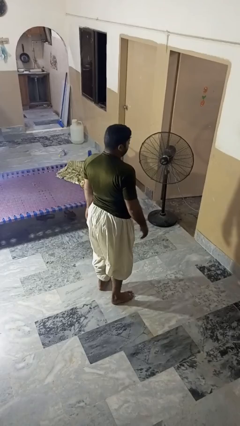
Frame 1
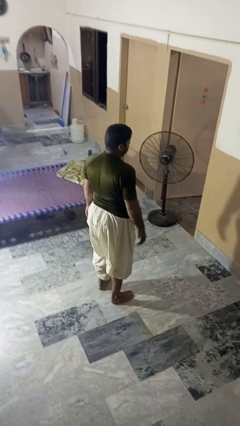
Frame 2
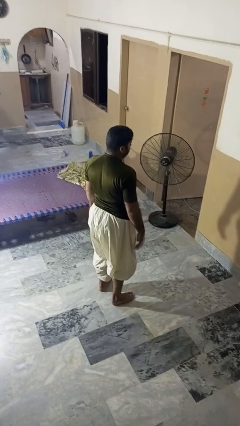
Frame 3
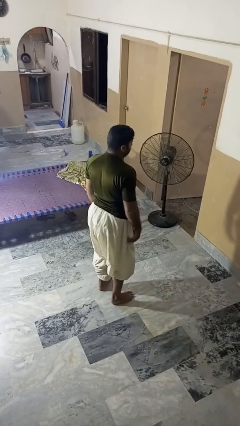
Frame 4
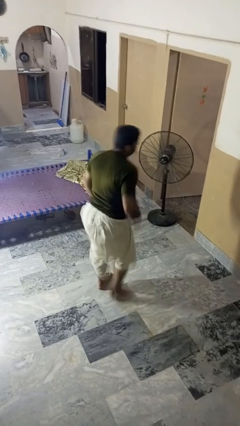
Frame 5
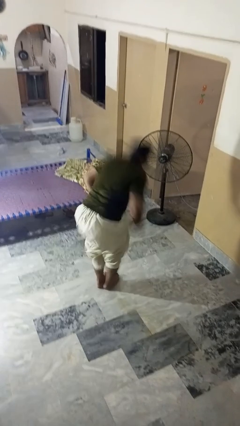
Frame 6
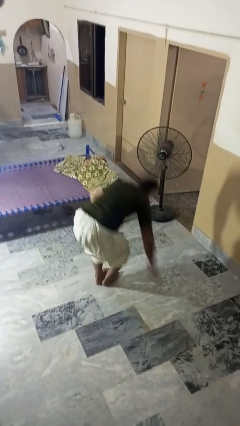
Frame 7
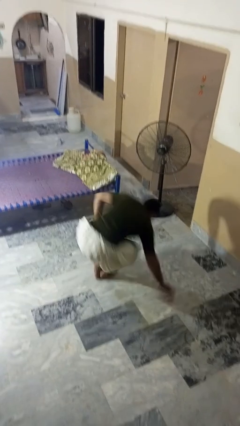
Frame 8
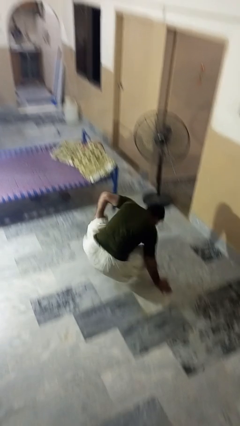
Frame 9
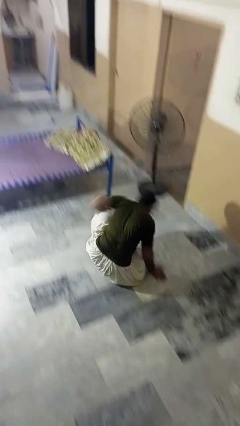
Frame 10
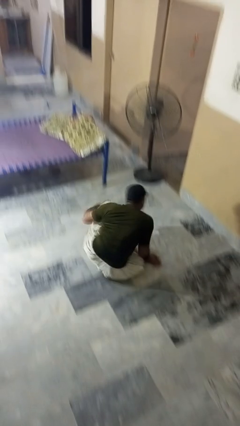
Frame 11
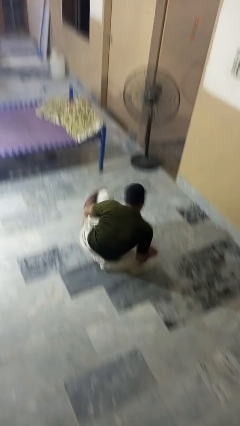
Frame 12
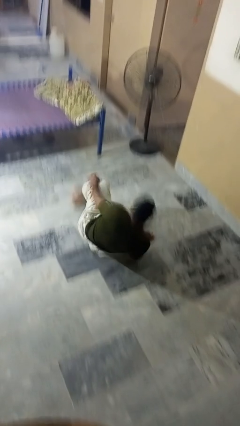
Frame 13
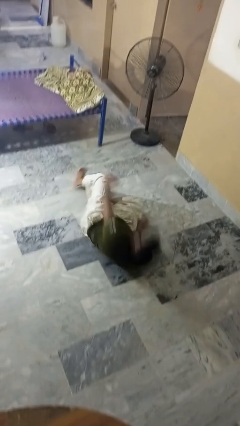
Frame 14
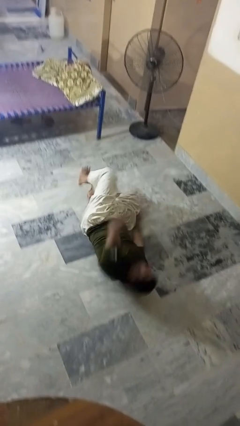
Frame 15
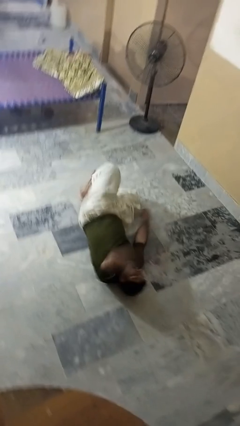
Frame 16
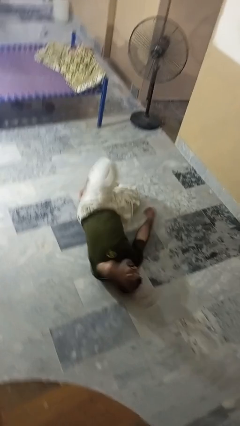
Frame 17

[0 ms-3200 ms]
person falls while standing

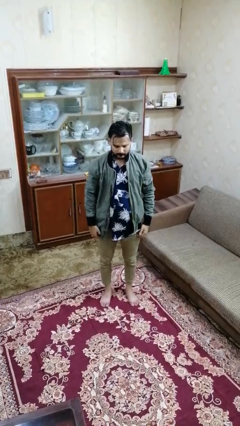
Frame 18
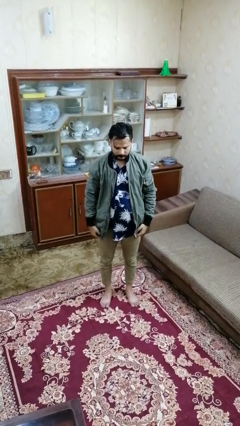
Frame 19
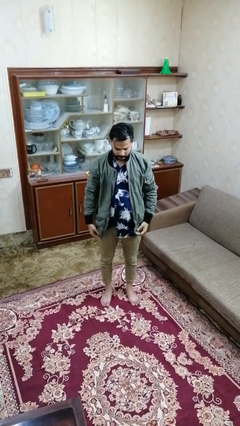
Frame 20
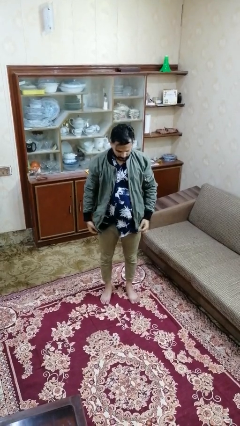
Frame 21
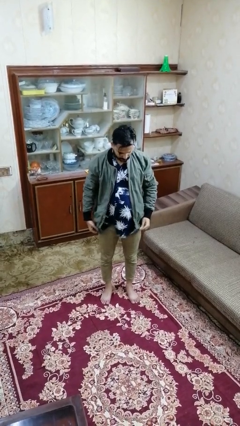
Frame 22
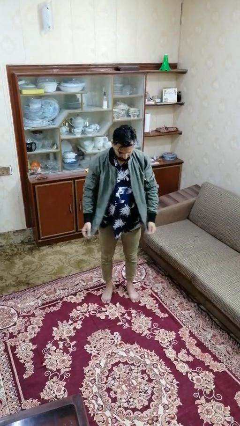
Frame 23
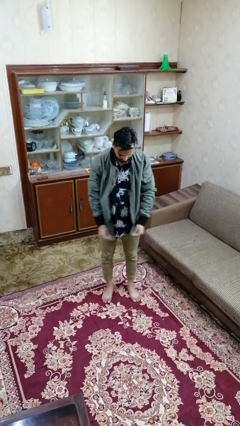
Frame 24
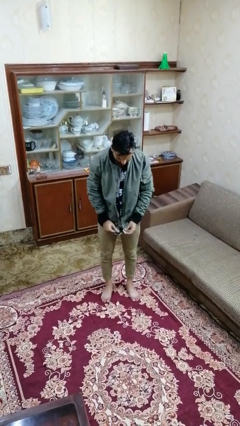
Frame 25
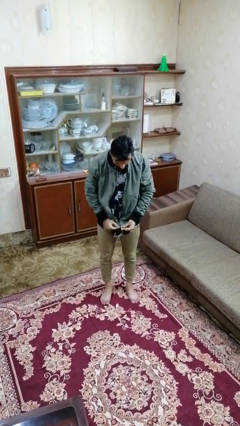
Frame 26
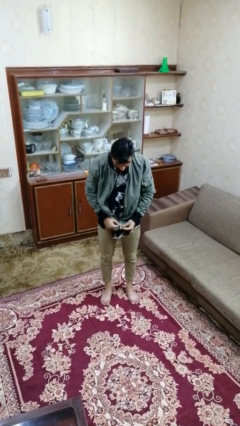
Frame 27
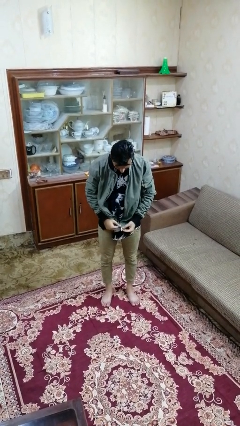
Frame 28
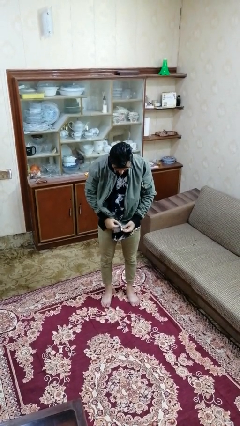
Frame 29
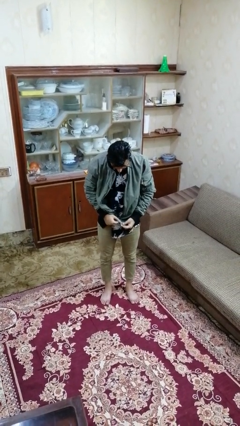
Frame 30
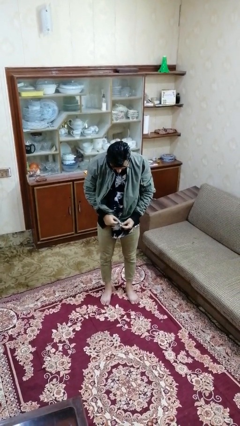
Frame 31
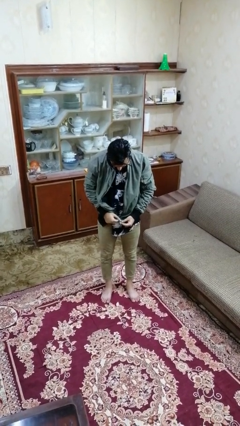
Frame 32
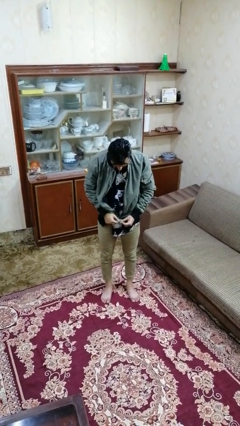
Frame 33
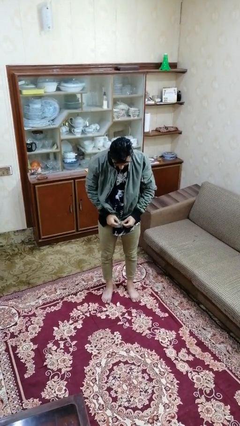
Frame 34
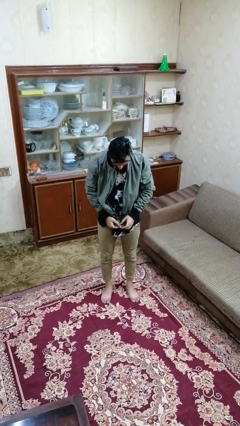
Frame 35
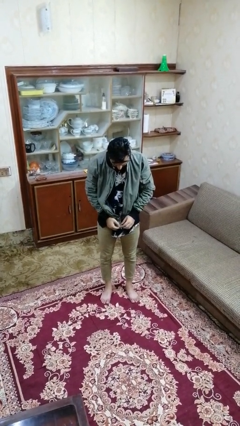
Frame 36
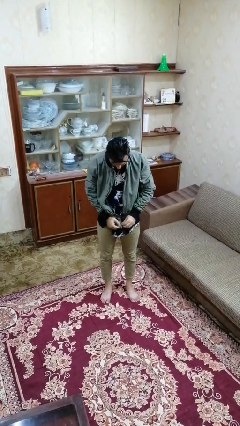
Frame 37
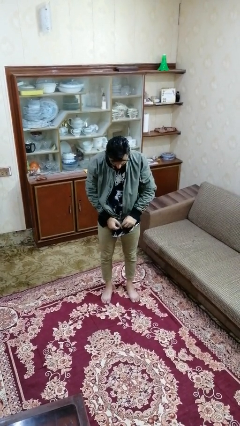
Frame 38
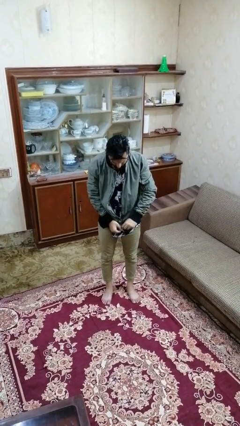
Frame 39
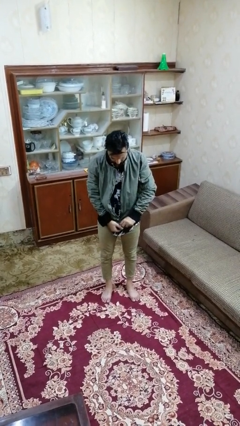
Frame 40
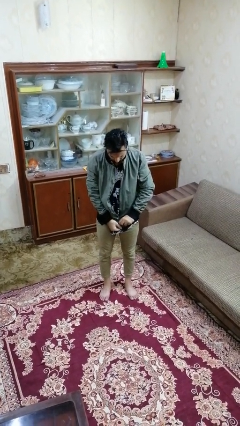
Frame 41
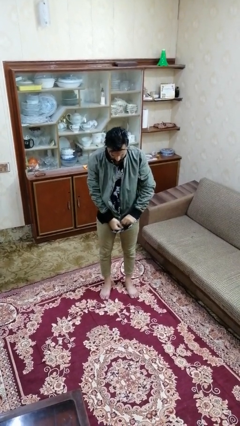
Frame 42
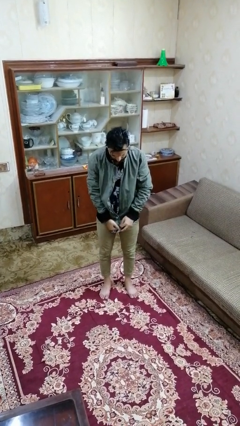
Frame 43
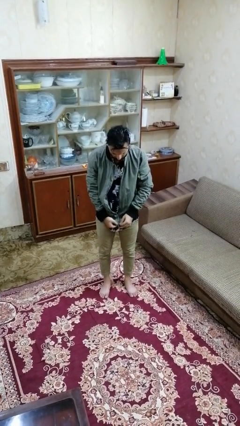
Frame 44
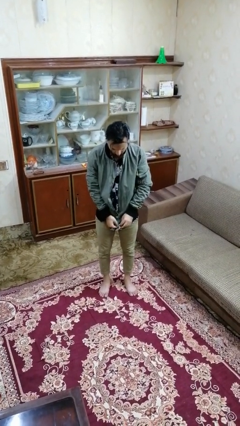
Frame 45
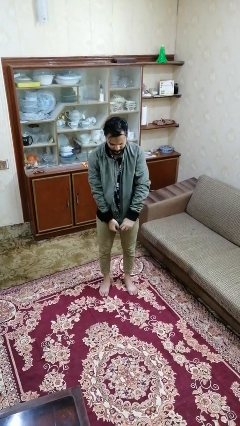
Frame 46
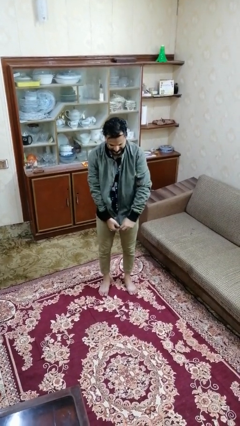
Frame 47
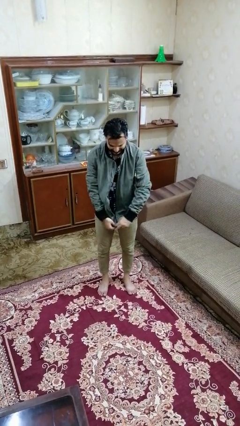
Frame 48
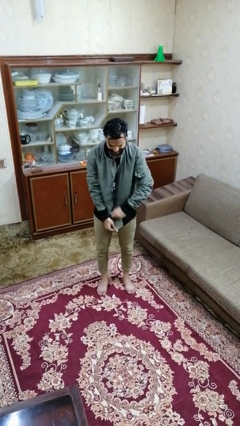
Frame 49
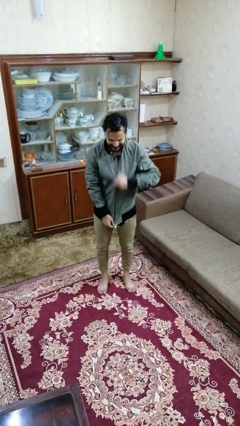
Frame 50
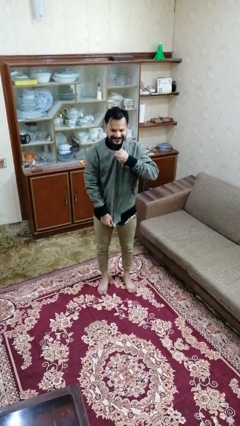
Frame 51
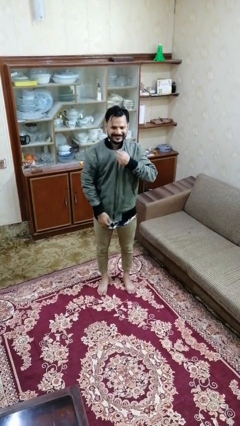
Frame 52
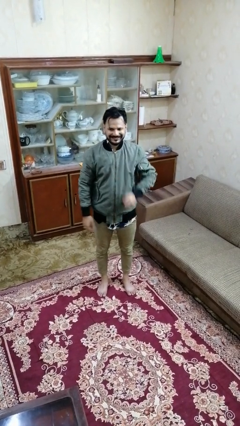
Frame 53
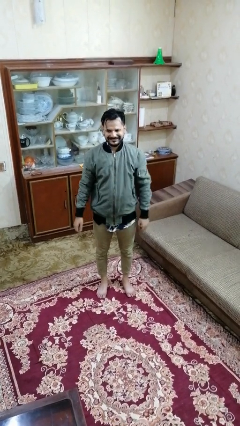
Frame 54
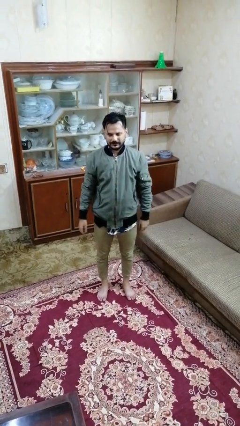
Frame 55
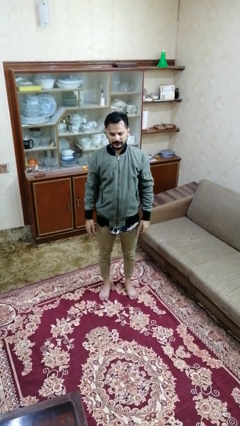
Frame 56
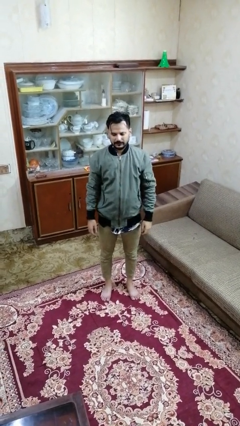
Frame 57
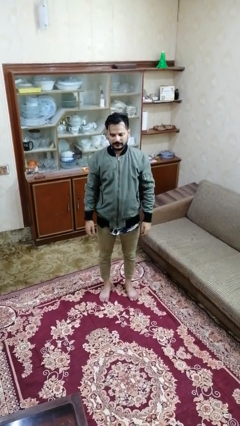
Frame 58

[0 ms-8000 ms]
person zips up jacket

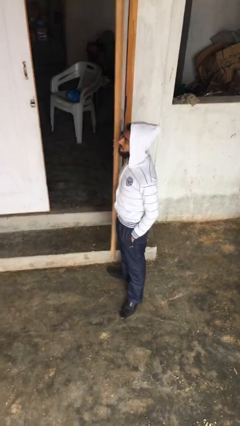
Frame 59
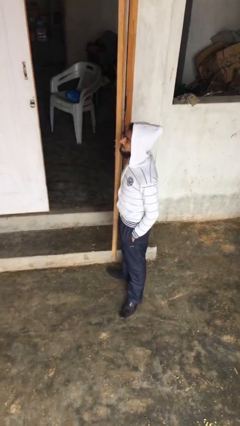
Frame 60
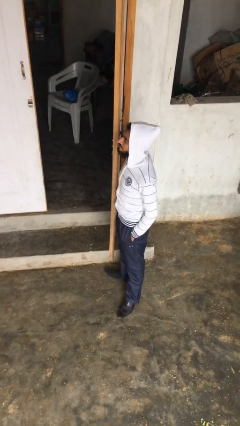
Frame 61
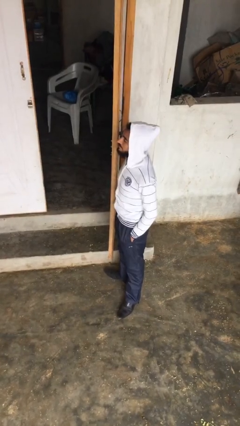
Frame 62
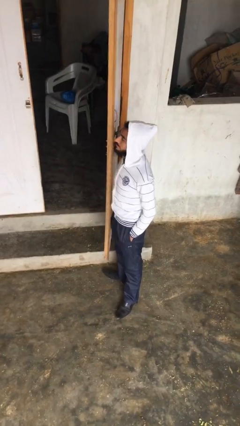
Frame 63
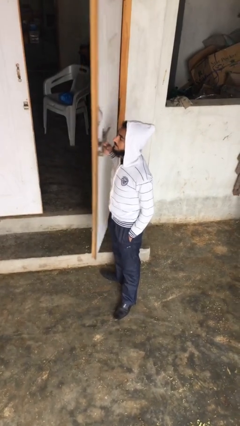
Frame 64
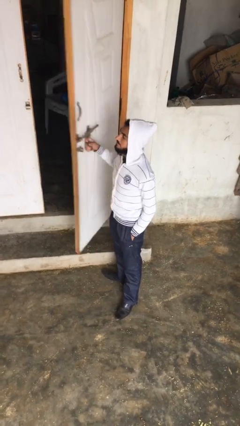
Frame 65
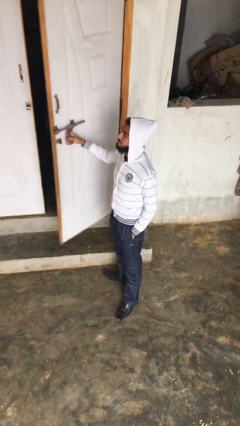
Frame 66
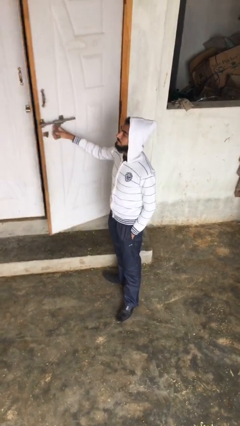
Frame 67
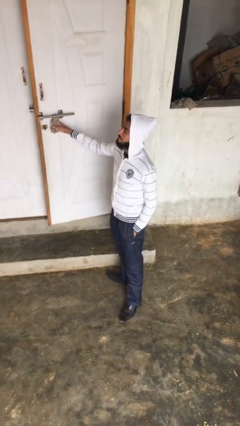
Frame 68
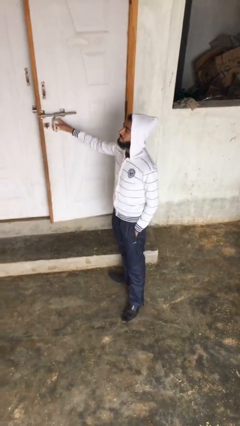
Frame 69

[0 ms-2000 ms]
person closes facility door

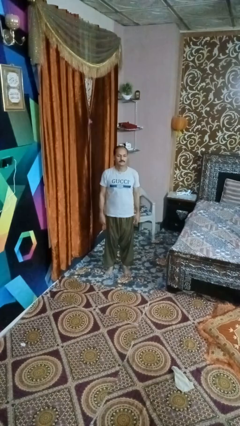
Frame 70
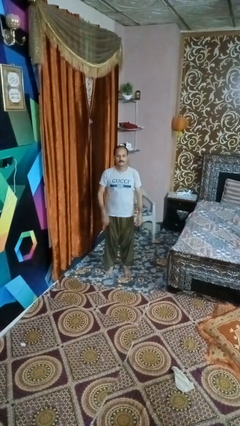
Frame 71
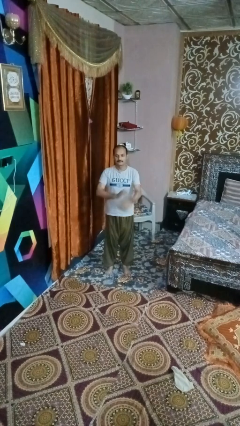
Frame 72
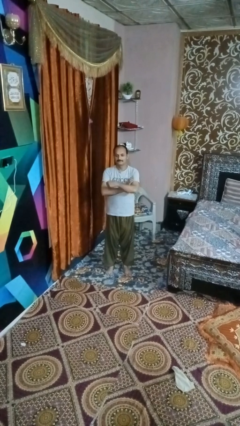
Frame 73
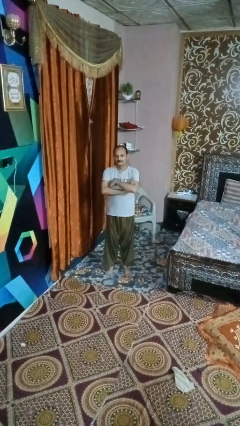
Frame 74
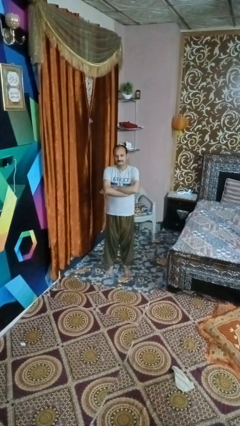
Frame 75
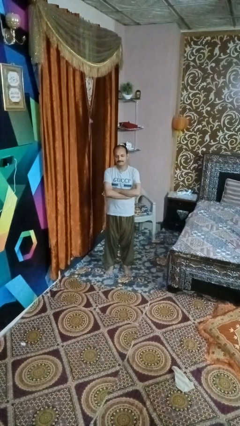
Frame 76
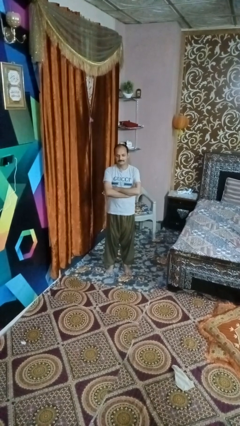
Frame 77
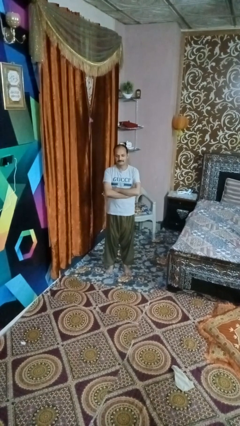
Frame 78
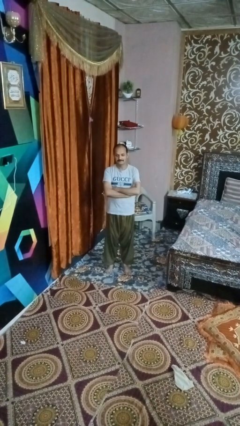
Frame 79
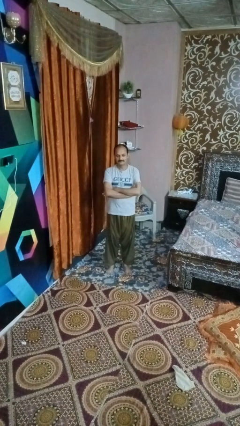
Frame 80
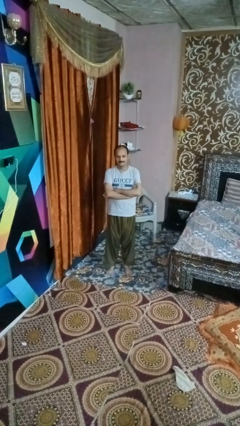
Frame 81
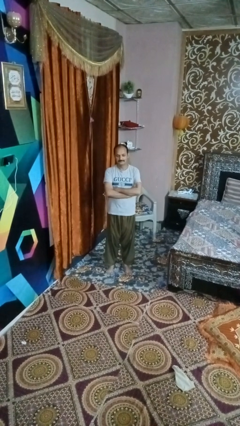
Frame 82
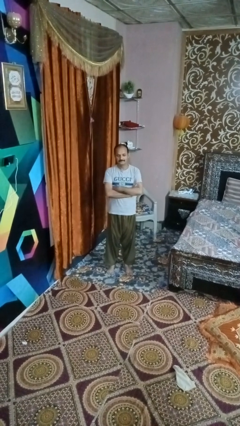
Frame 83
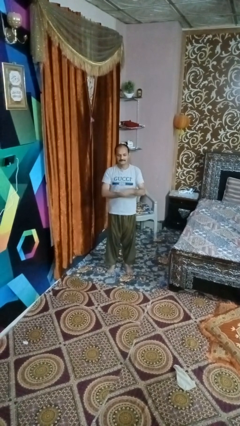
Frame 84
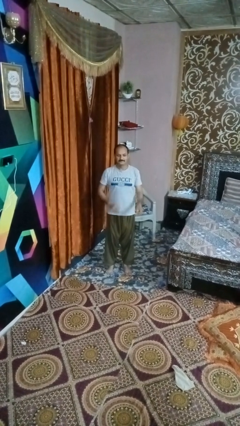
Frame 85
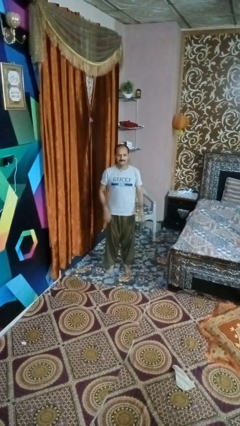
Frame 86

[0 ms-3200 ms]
person crosses arms

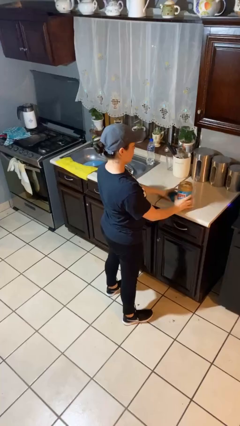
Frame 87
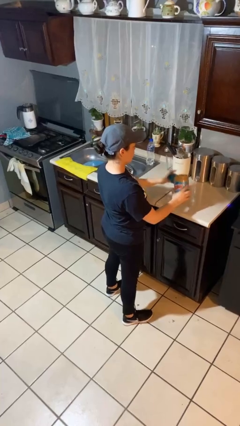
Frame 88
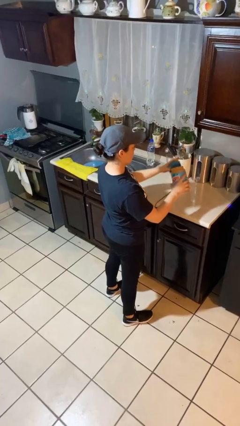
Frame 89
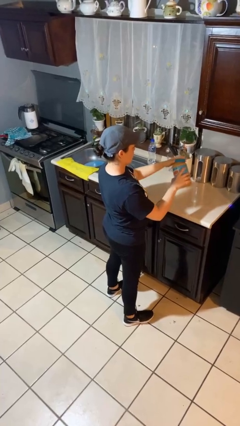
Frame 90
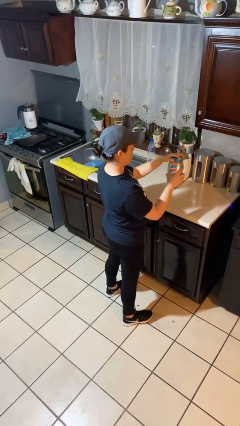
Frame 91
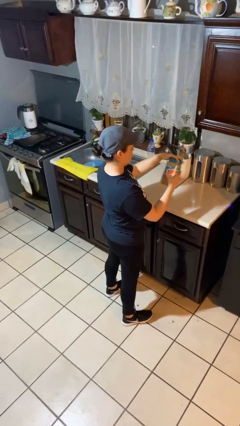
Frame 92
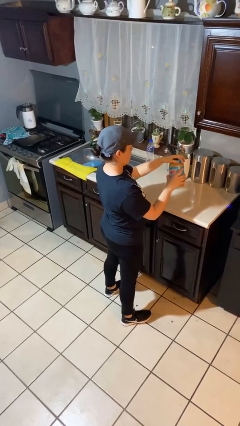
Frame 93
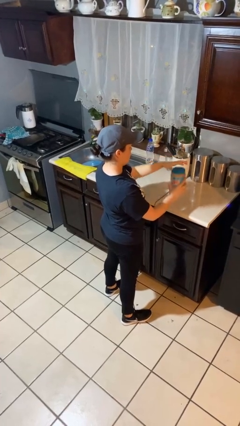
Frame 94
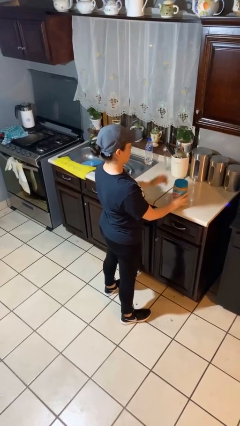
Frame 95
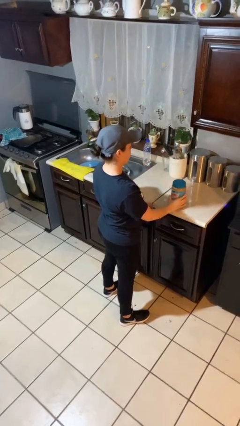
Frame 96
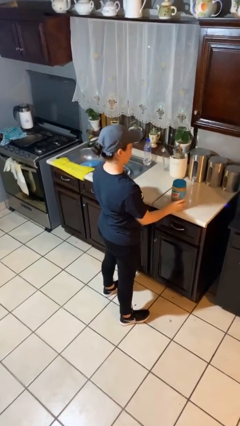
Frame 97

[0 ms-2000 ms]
person closes jar
